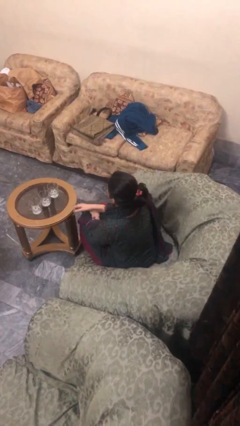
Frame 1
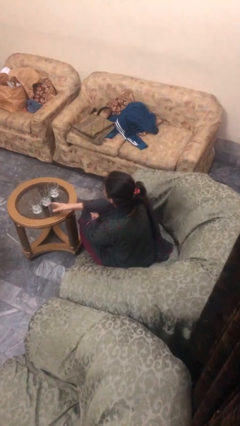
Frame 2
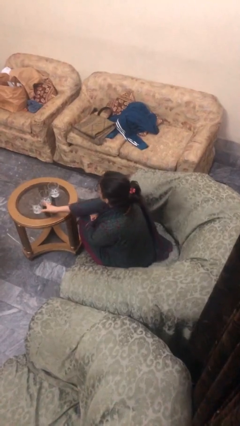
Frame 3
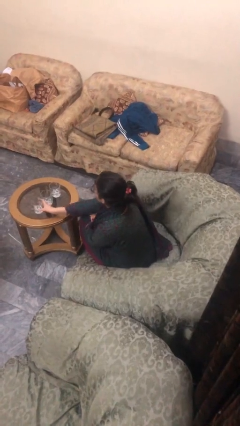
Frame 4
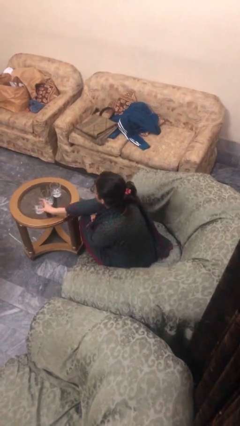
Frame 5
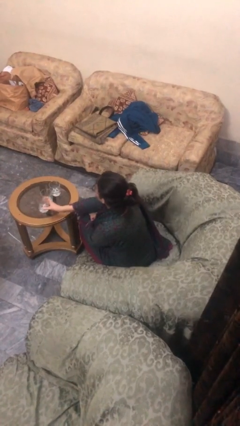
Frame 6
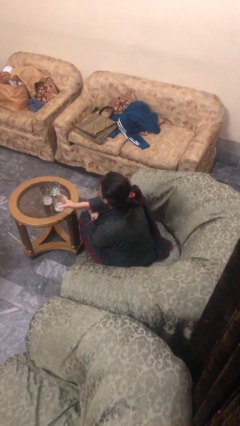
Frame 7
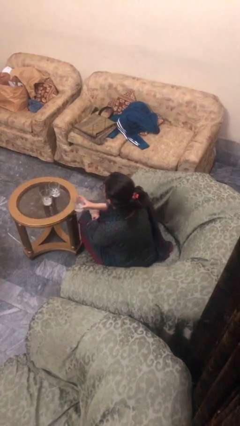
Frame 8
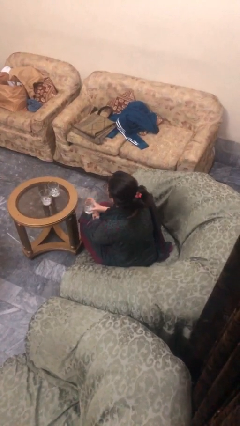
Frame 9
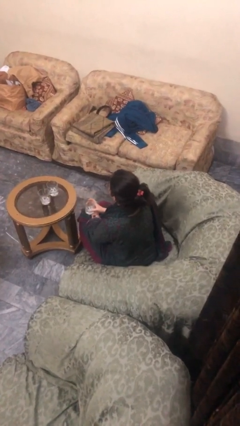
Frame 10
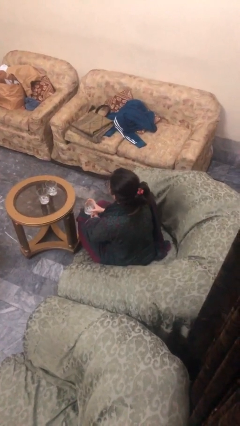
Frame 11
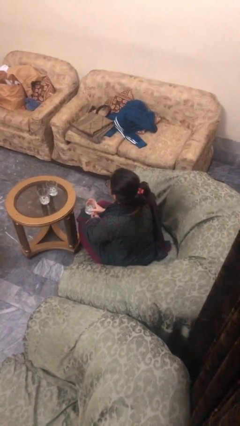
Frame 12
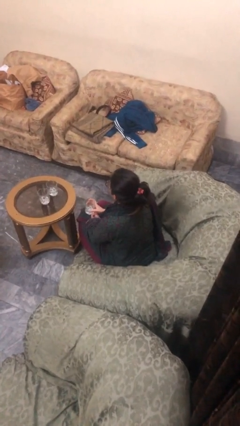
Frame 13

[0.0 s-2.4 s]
person picks up object from table

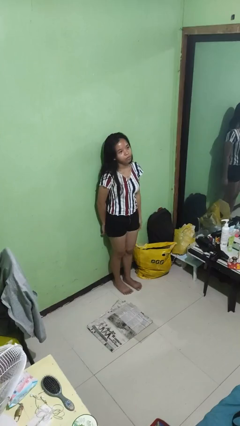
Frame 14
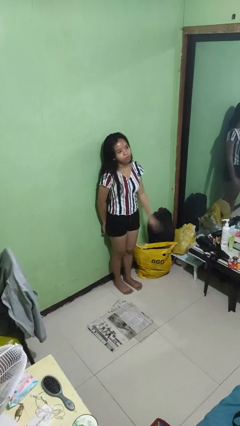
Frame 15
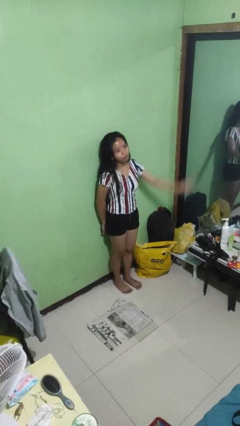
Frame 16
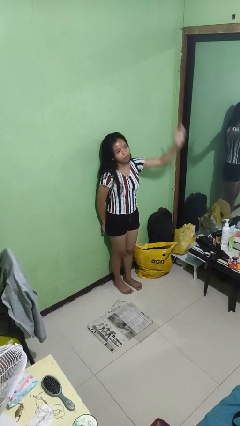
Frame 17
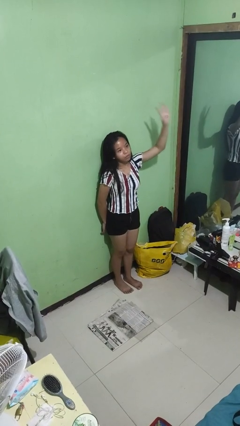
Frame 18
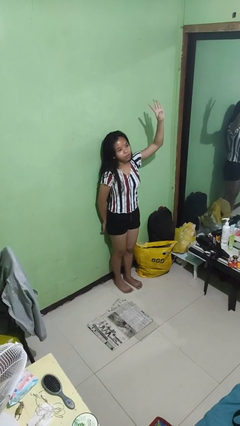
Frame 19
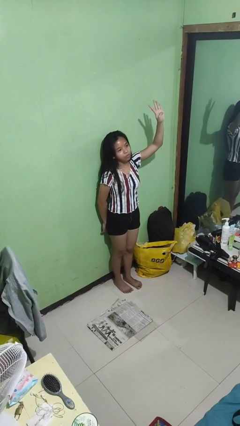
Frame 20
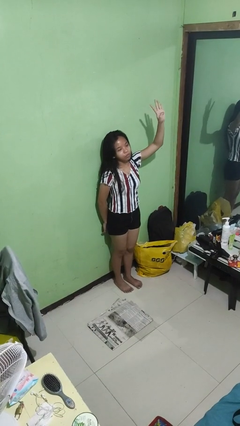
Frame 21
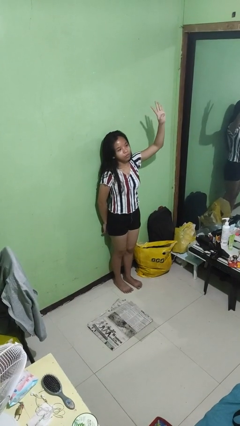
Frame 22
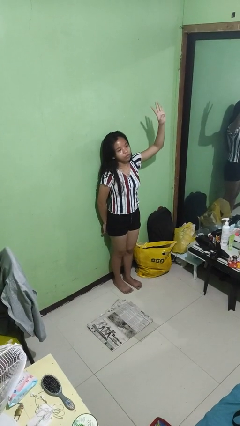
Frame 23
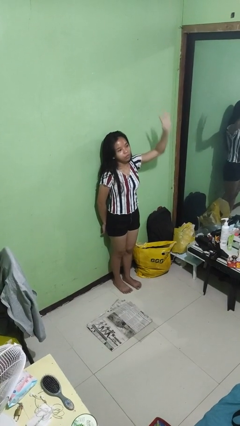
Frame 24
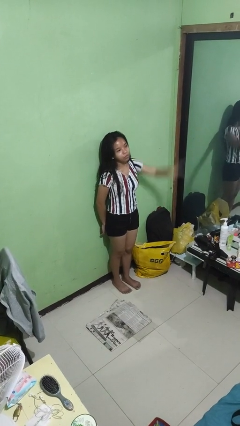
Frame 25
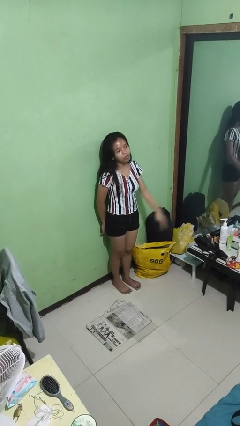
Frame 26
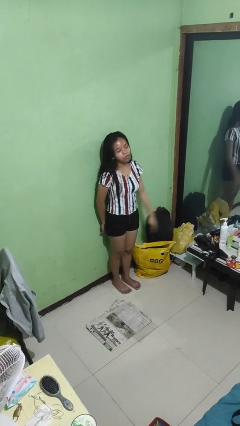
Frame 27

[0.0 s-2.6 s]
person gestures number four

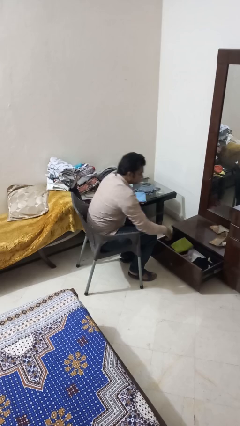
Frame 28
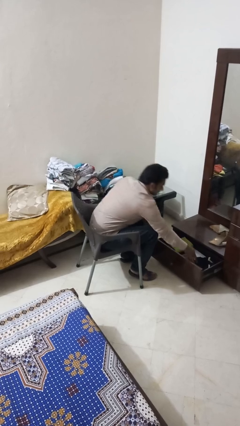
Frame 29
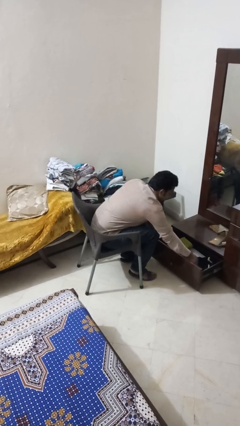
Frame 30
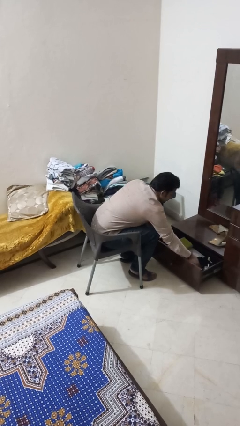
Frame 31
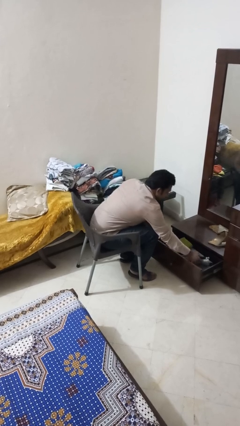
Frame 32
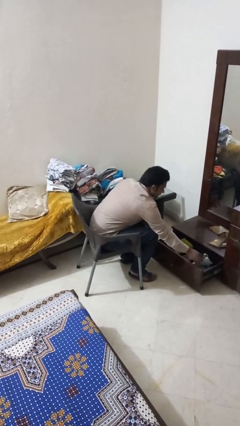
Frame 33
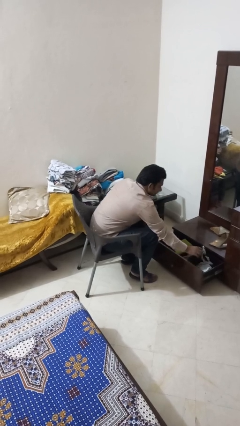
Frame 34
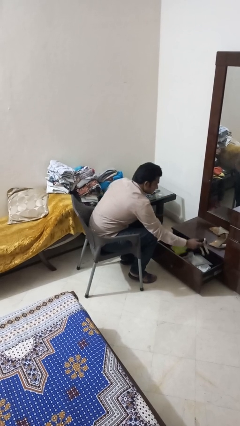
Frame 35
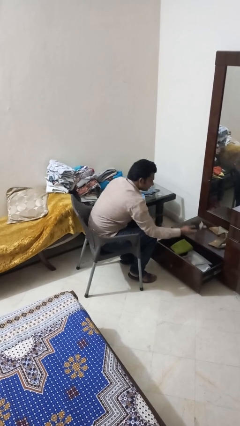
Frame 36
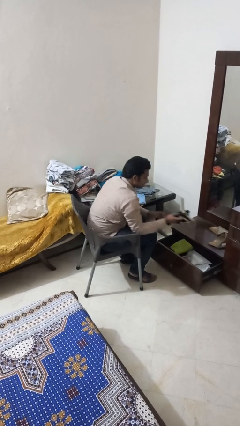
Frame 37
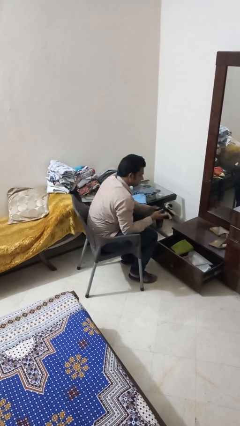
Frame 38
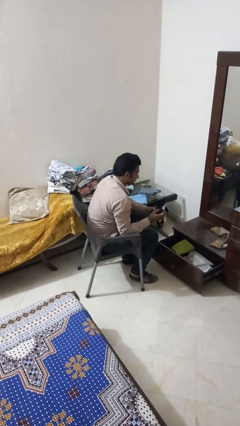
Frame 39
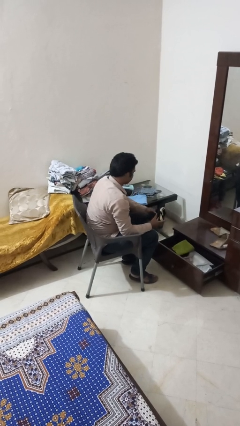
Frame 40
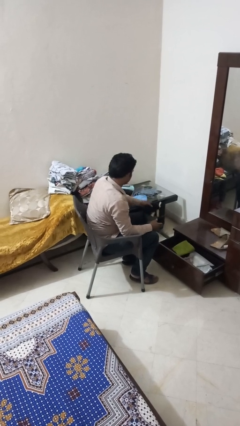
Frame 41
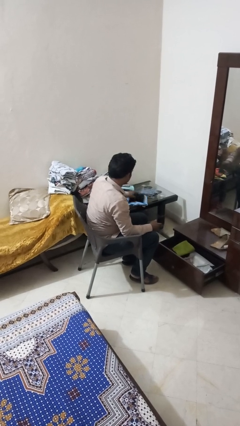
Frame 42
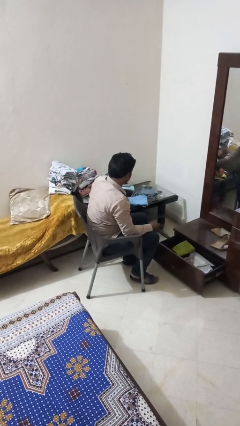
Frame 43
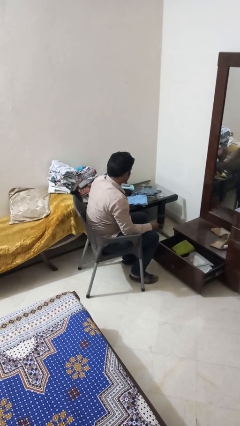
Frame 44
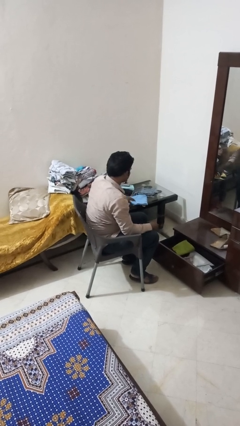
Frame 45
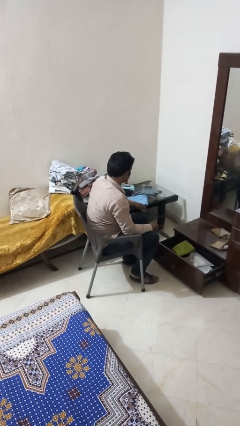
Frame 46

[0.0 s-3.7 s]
person takes clothes from dresser

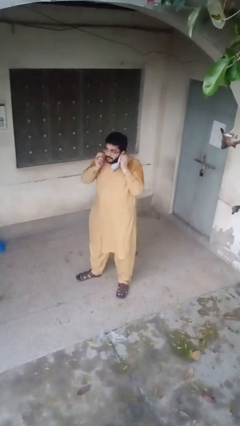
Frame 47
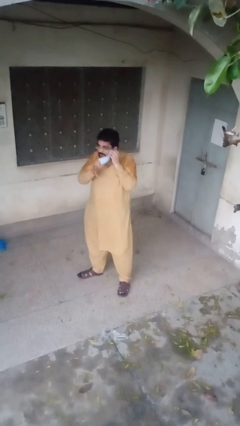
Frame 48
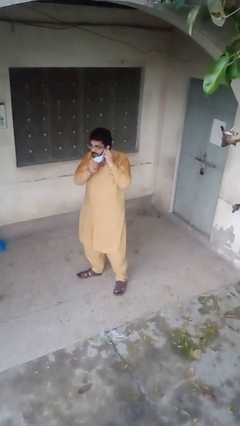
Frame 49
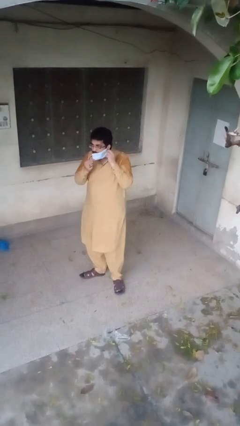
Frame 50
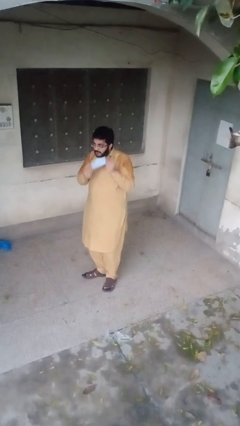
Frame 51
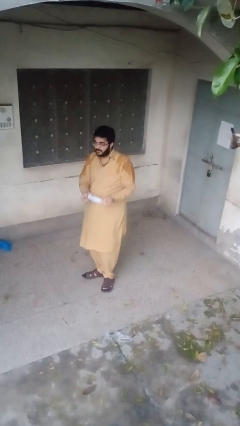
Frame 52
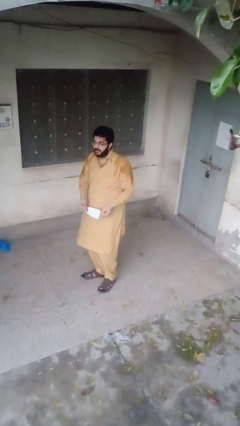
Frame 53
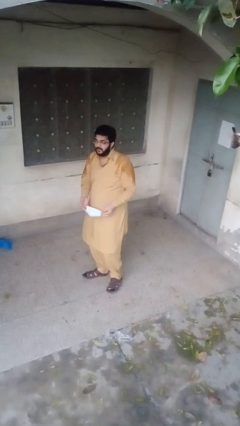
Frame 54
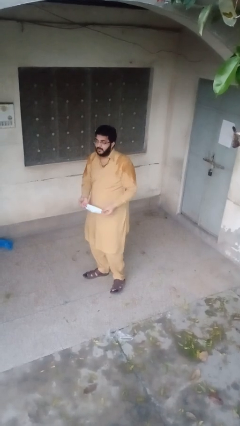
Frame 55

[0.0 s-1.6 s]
person takes off facemask

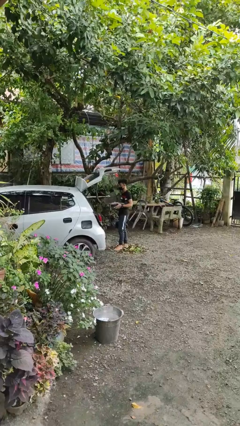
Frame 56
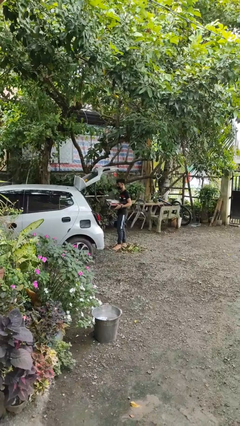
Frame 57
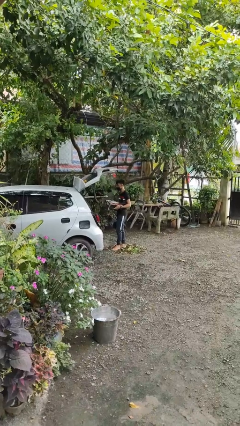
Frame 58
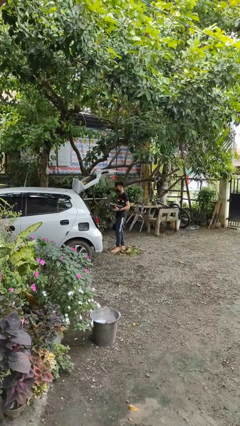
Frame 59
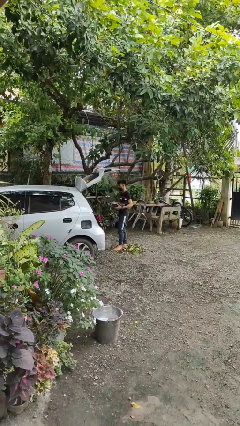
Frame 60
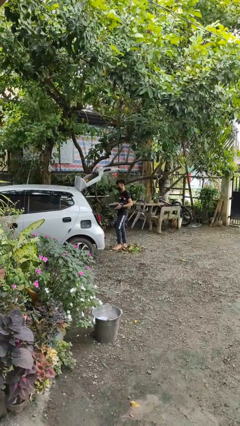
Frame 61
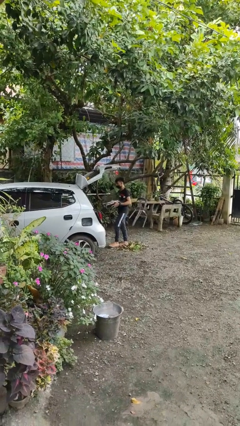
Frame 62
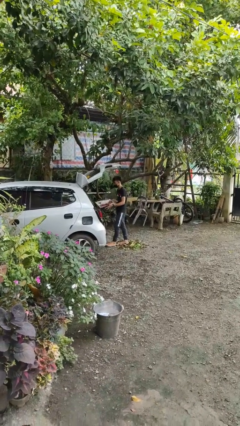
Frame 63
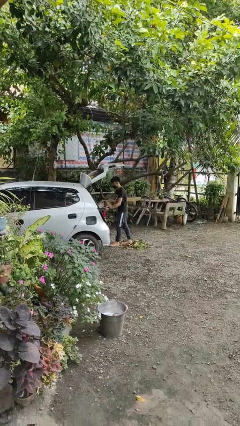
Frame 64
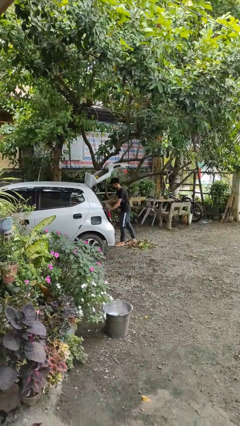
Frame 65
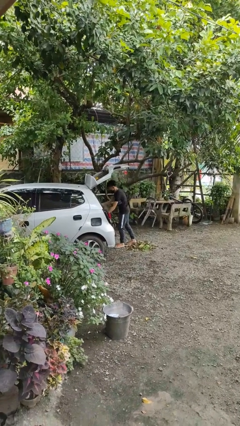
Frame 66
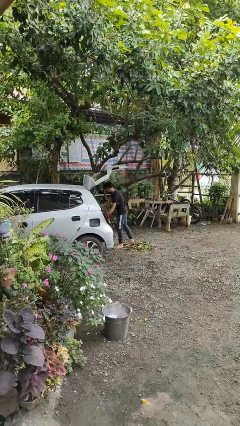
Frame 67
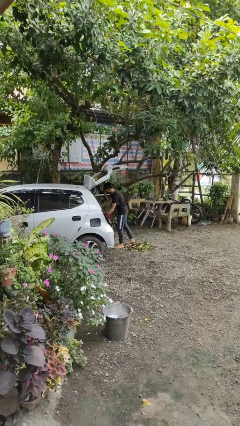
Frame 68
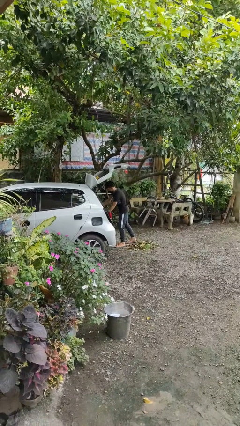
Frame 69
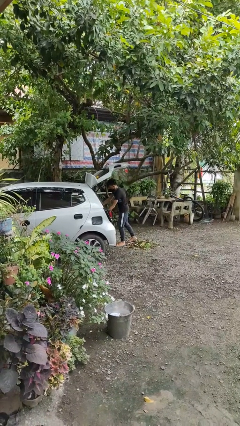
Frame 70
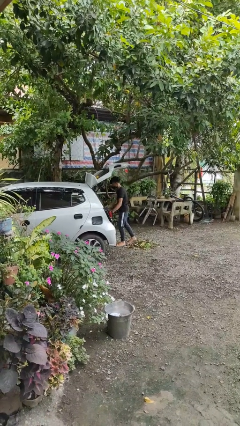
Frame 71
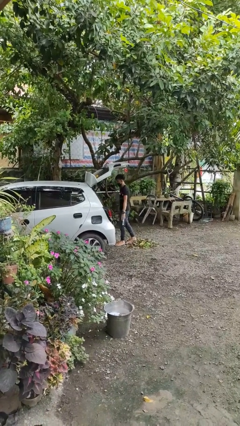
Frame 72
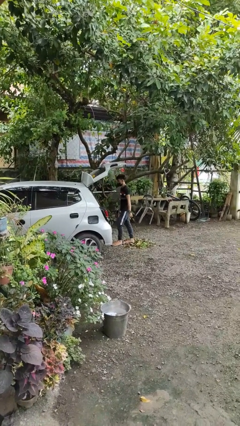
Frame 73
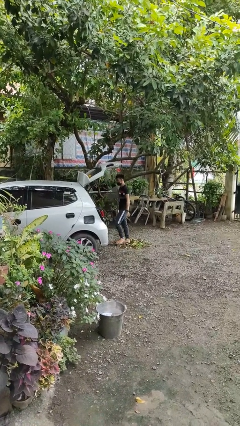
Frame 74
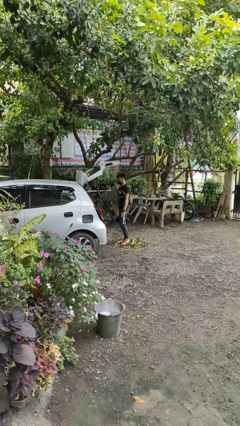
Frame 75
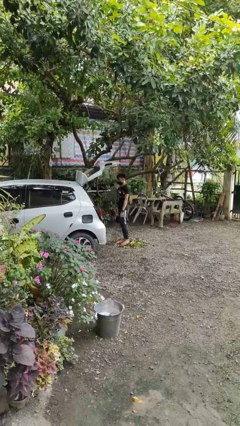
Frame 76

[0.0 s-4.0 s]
person loads car

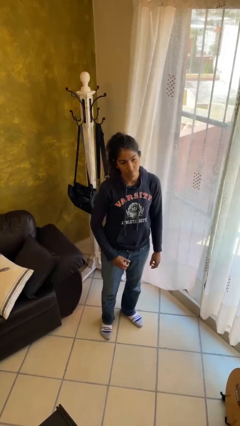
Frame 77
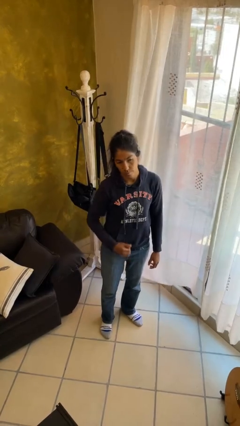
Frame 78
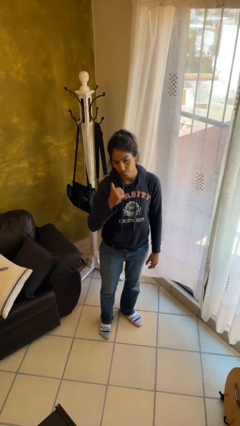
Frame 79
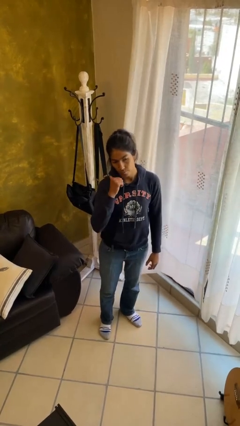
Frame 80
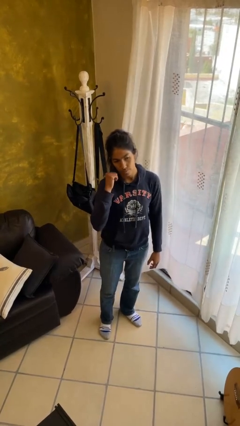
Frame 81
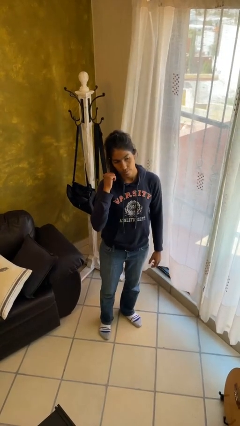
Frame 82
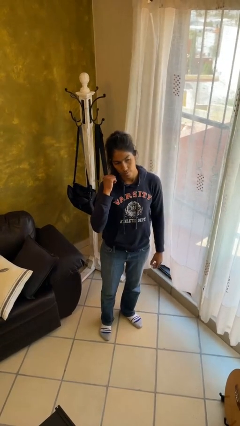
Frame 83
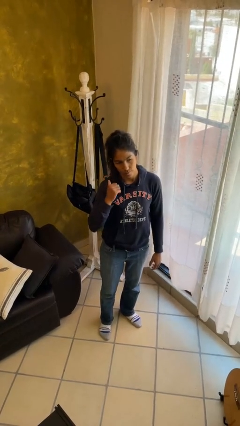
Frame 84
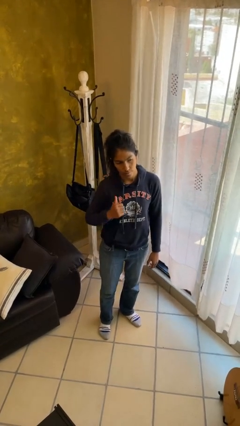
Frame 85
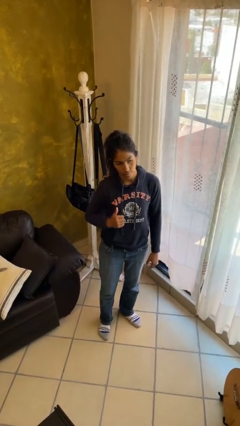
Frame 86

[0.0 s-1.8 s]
person gestures behind me

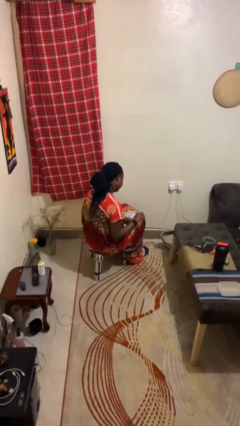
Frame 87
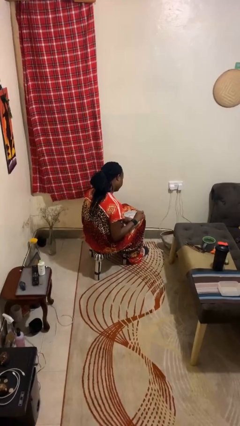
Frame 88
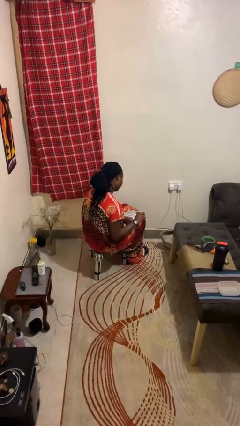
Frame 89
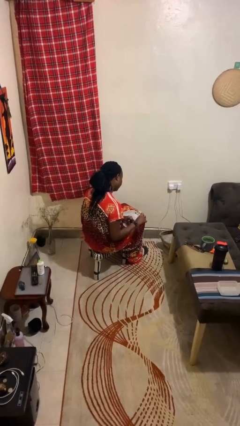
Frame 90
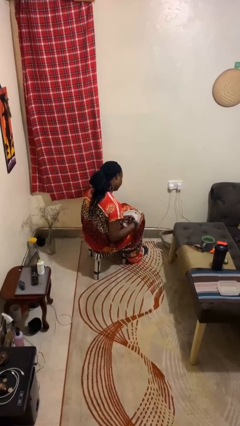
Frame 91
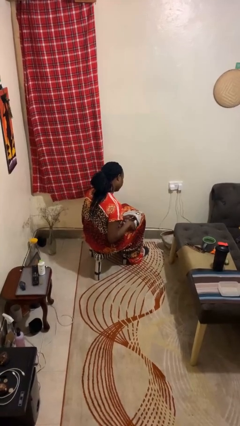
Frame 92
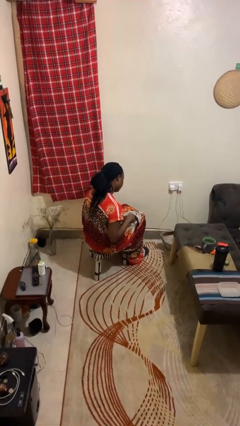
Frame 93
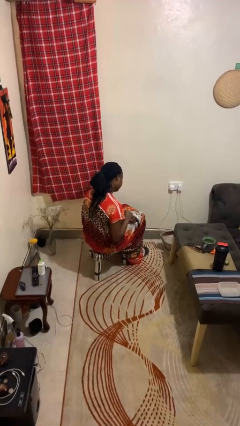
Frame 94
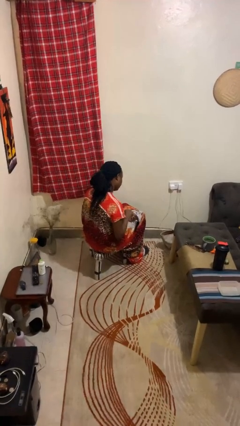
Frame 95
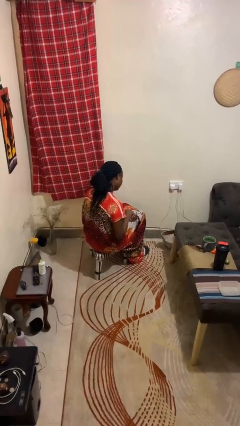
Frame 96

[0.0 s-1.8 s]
person takes off wristwatch
